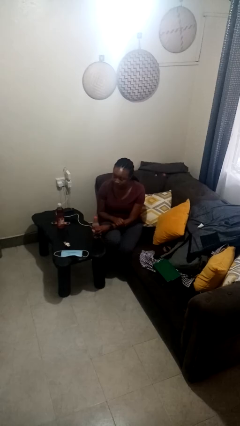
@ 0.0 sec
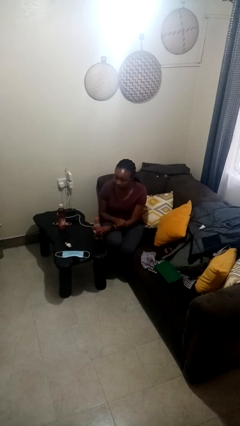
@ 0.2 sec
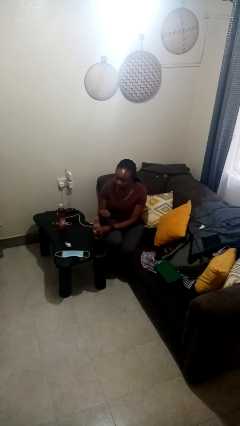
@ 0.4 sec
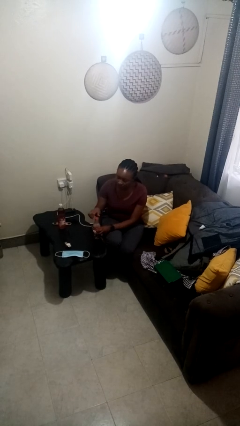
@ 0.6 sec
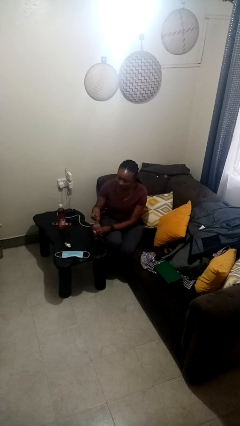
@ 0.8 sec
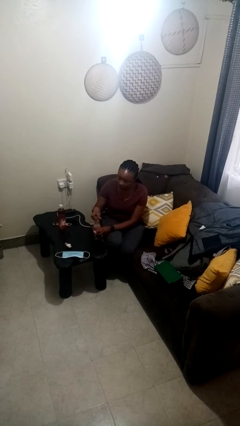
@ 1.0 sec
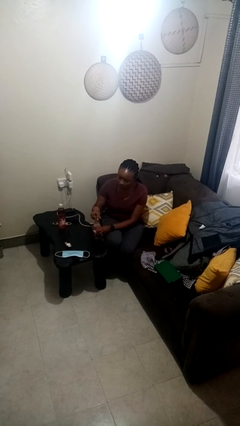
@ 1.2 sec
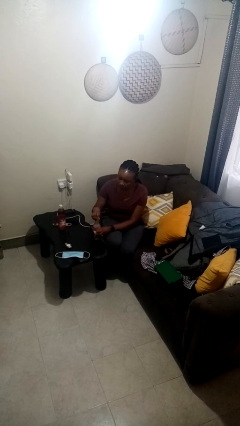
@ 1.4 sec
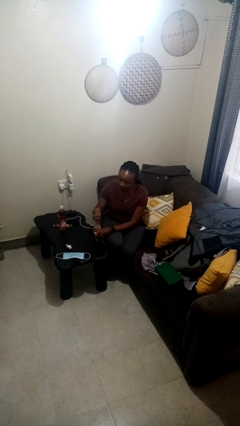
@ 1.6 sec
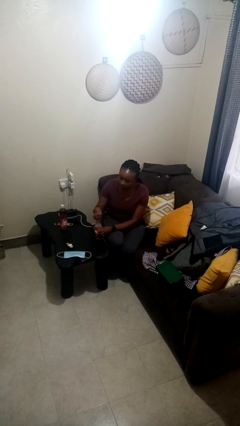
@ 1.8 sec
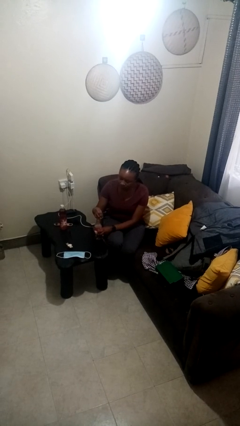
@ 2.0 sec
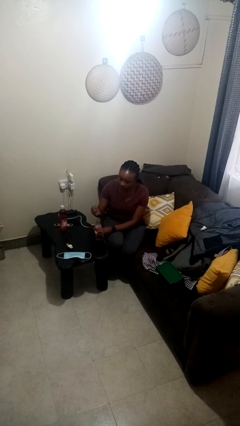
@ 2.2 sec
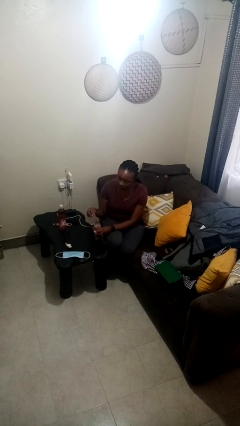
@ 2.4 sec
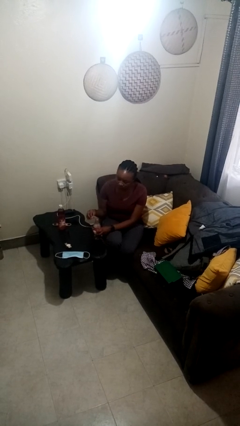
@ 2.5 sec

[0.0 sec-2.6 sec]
person unscrews lid from bottle

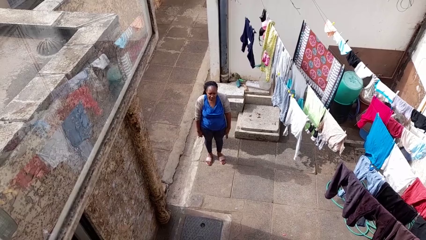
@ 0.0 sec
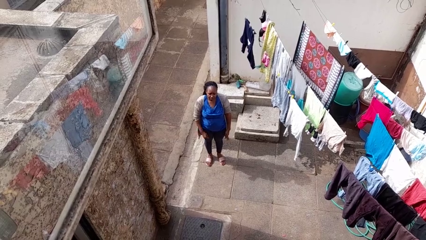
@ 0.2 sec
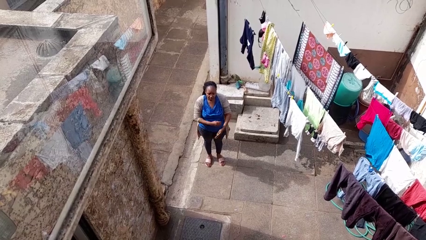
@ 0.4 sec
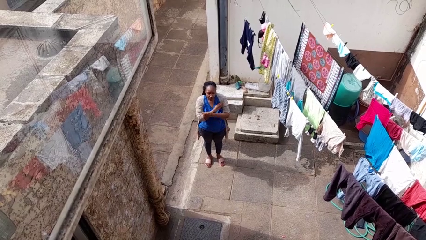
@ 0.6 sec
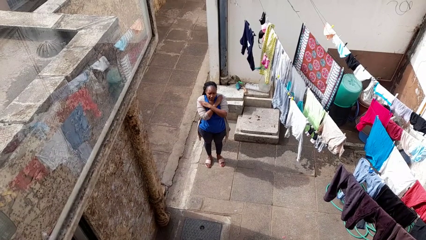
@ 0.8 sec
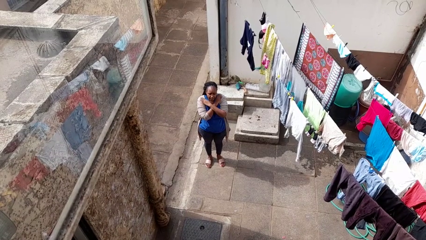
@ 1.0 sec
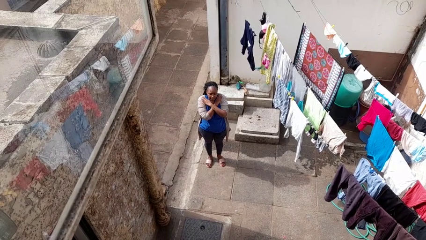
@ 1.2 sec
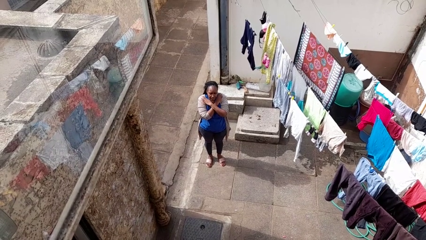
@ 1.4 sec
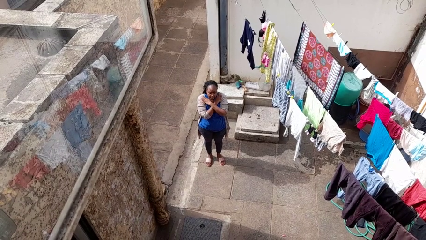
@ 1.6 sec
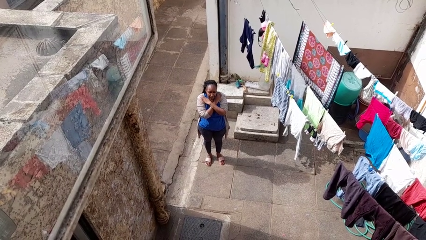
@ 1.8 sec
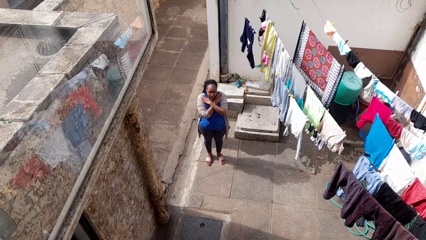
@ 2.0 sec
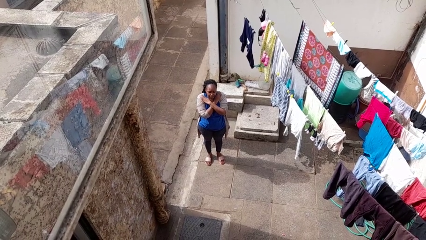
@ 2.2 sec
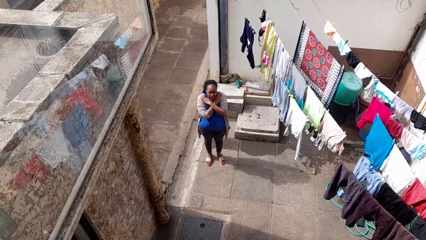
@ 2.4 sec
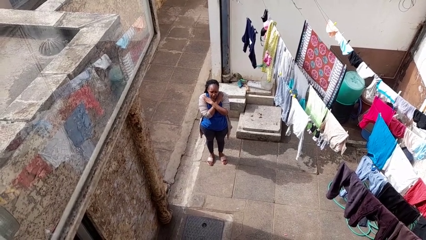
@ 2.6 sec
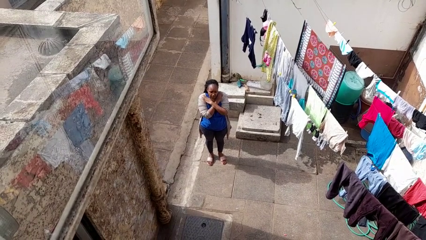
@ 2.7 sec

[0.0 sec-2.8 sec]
person gestures arms x

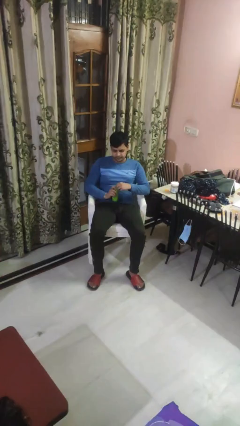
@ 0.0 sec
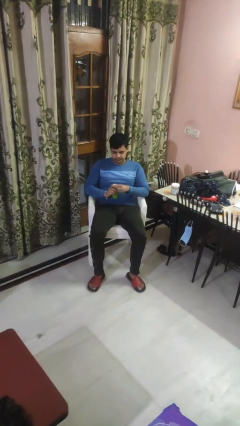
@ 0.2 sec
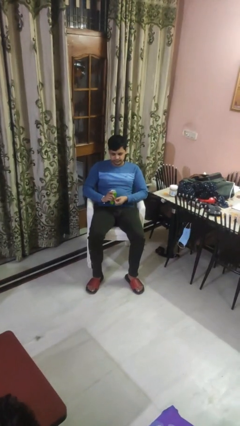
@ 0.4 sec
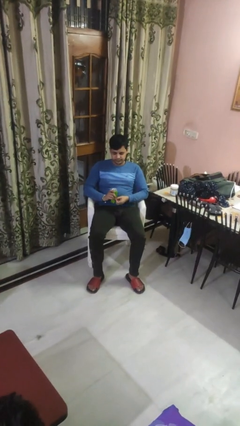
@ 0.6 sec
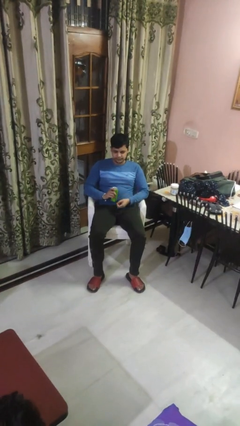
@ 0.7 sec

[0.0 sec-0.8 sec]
person opens beverage can

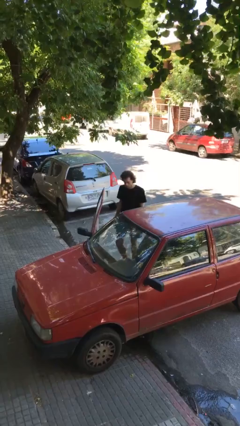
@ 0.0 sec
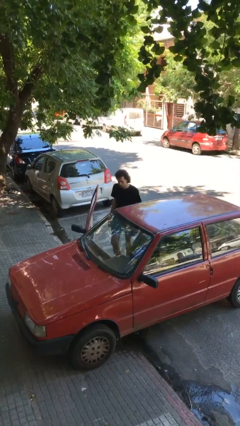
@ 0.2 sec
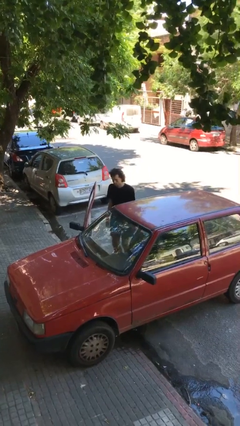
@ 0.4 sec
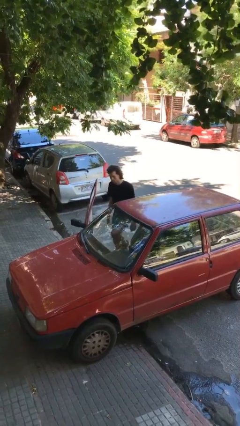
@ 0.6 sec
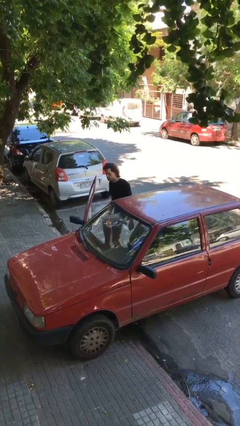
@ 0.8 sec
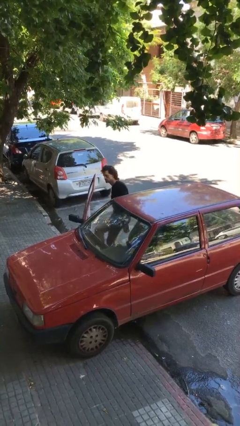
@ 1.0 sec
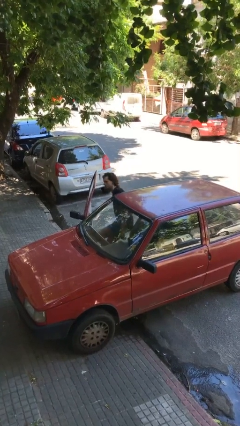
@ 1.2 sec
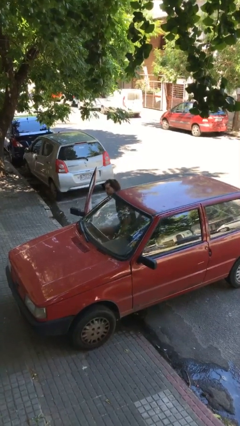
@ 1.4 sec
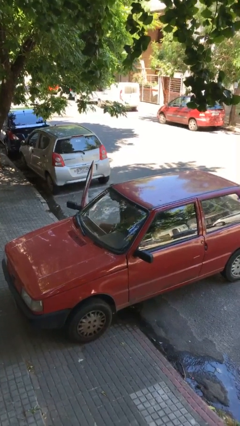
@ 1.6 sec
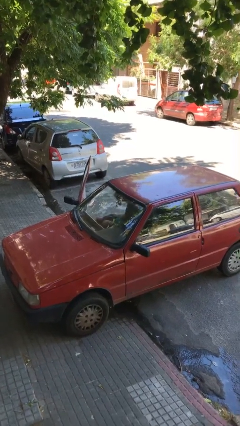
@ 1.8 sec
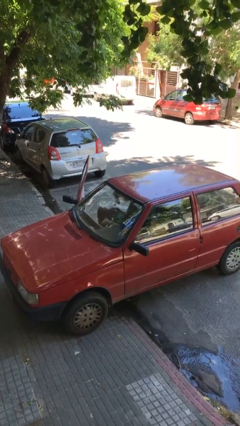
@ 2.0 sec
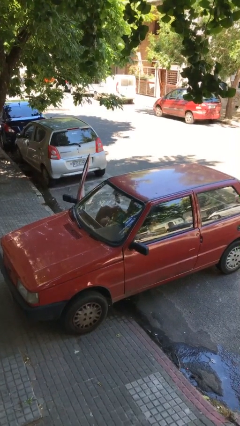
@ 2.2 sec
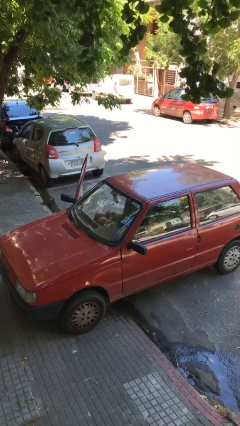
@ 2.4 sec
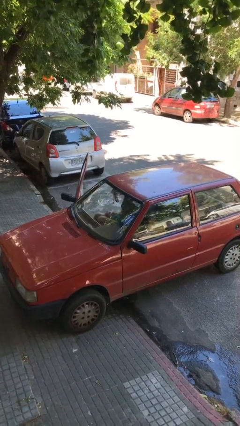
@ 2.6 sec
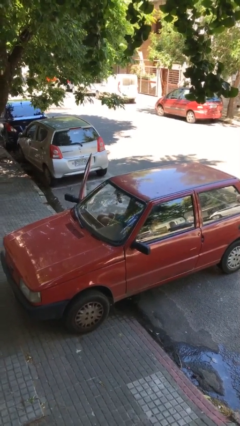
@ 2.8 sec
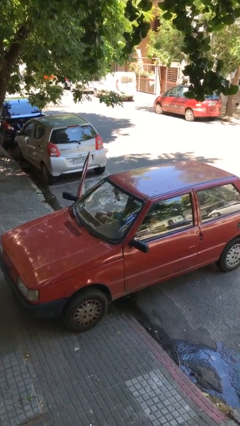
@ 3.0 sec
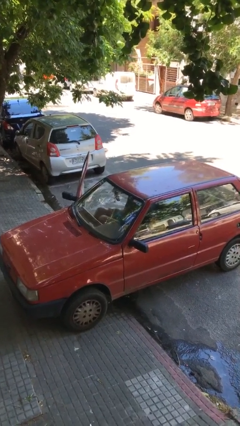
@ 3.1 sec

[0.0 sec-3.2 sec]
person enters car

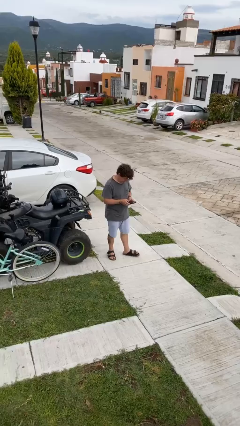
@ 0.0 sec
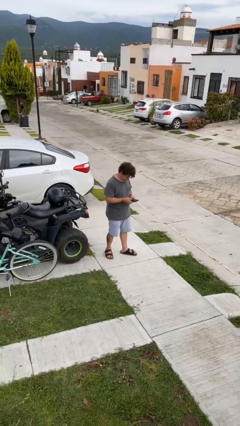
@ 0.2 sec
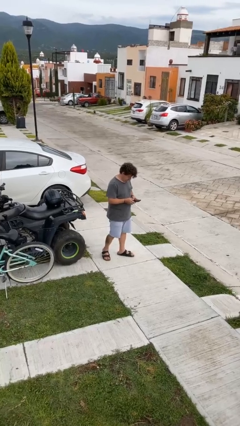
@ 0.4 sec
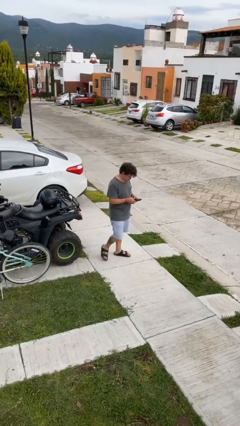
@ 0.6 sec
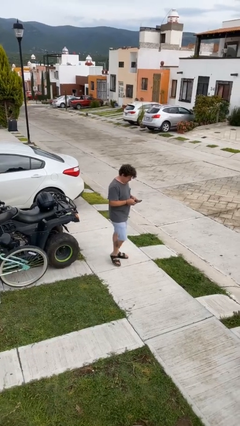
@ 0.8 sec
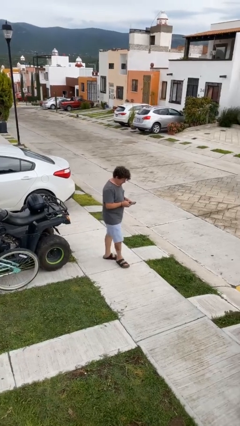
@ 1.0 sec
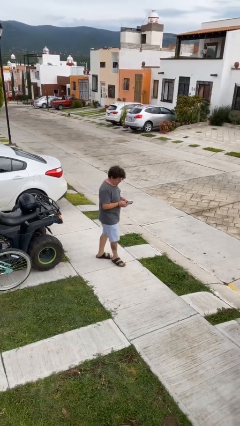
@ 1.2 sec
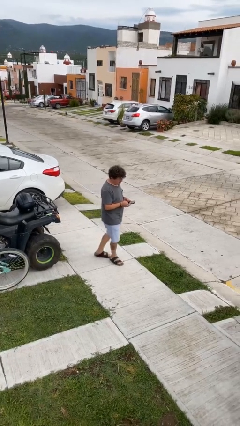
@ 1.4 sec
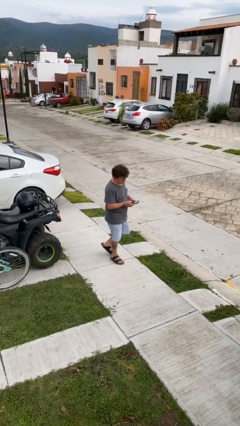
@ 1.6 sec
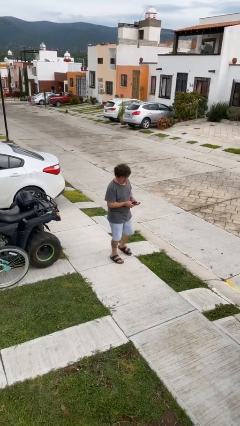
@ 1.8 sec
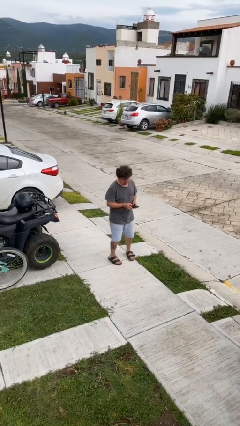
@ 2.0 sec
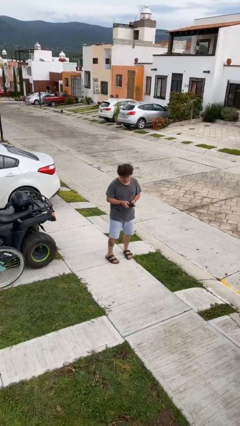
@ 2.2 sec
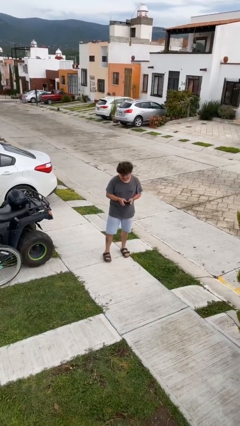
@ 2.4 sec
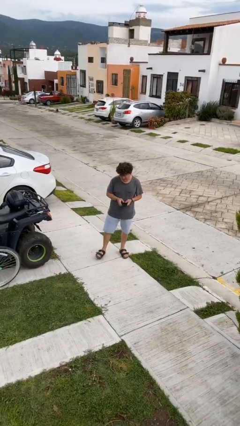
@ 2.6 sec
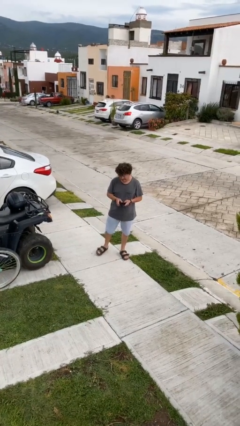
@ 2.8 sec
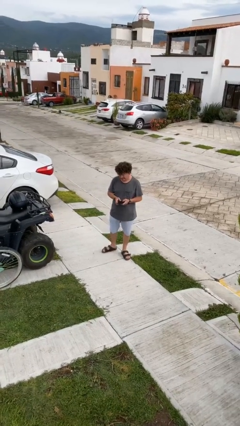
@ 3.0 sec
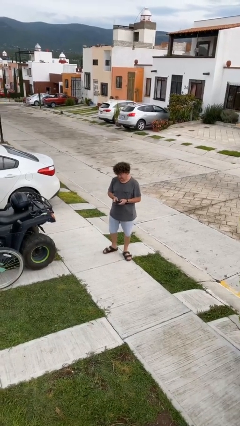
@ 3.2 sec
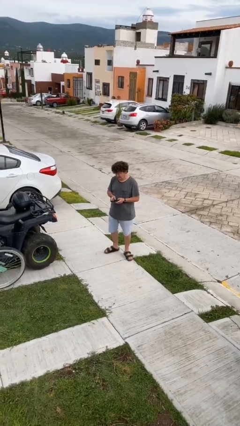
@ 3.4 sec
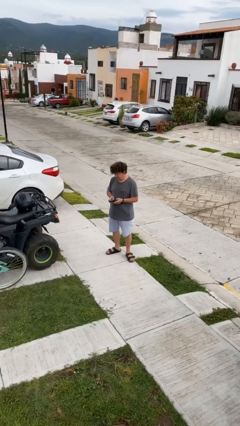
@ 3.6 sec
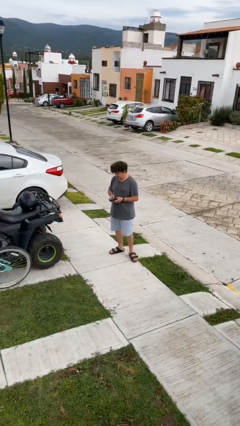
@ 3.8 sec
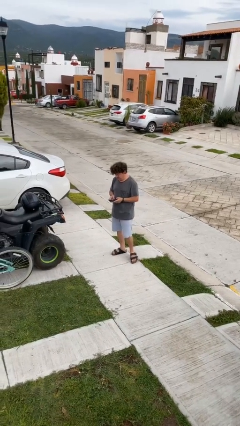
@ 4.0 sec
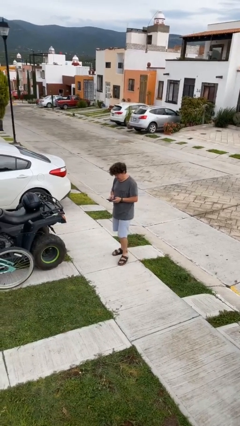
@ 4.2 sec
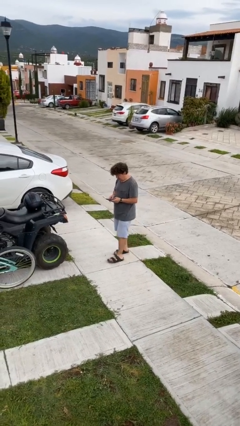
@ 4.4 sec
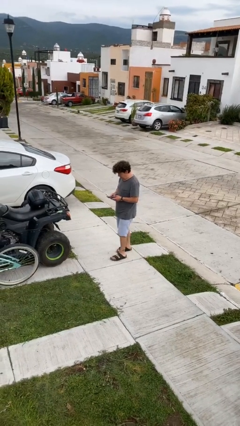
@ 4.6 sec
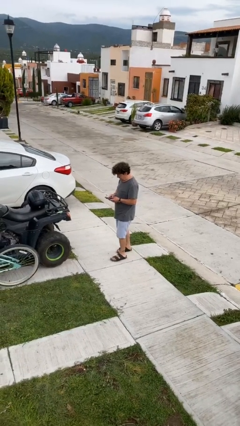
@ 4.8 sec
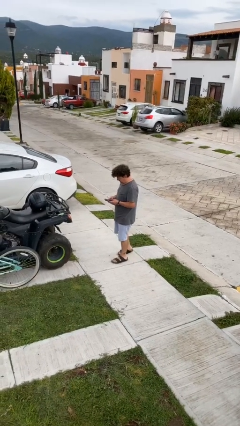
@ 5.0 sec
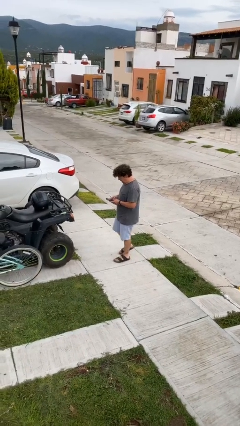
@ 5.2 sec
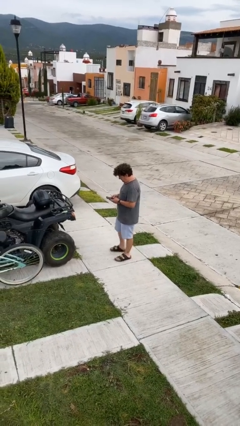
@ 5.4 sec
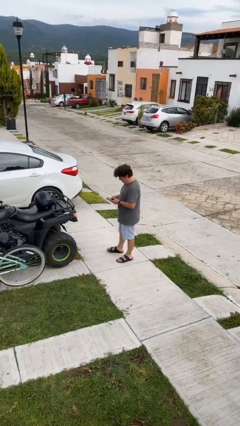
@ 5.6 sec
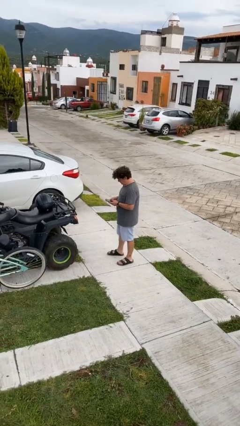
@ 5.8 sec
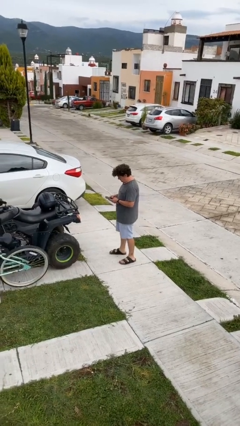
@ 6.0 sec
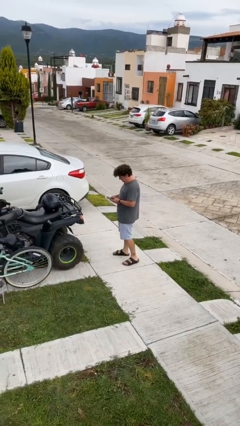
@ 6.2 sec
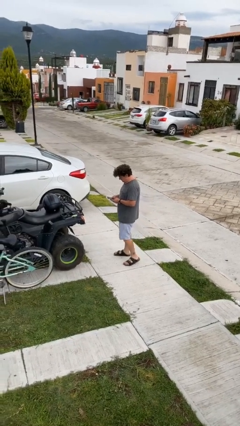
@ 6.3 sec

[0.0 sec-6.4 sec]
person texts on phone

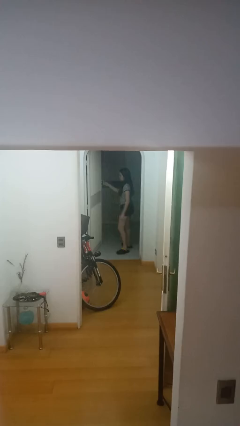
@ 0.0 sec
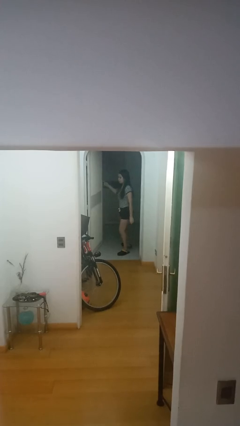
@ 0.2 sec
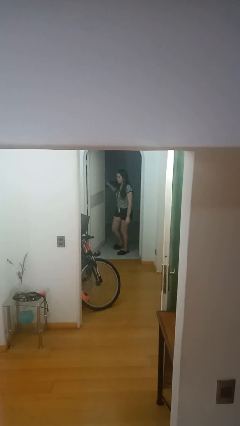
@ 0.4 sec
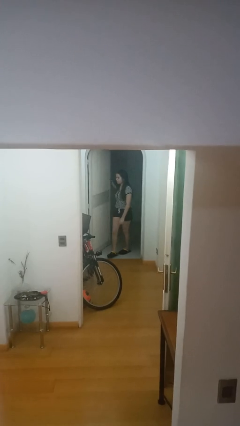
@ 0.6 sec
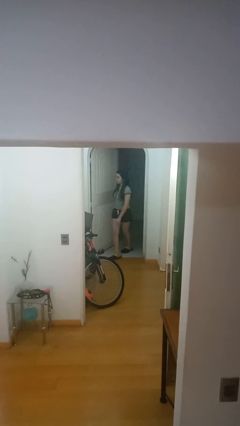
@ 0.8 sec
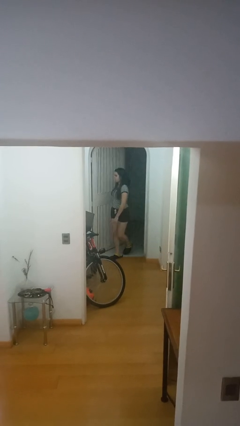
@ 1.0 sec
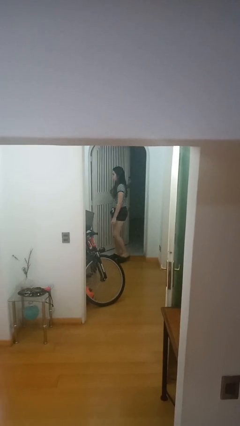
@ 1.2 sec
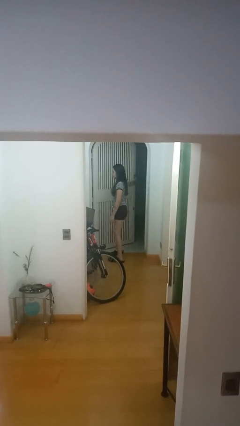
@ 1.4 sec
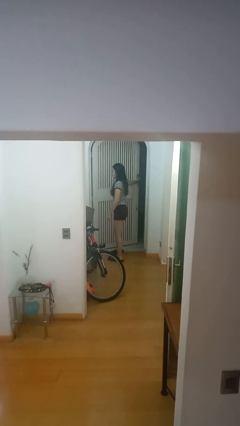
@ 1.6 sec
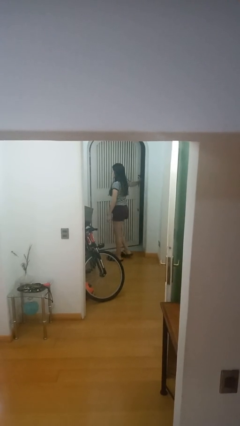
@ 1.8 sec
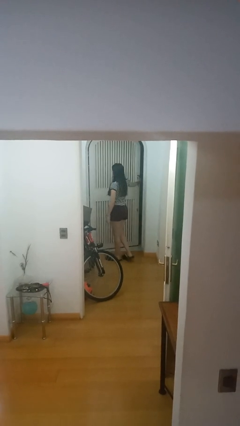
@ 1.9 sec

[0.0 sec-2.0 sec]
person closes facility door
